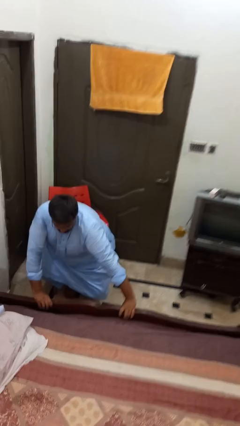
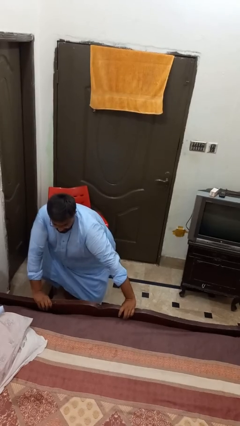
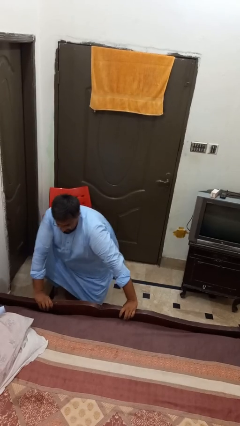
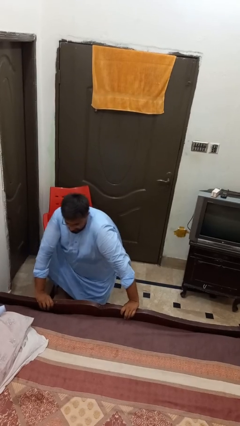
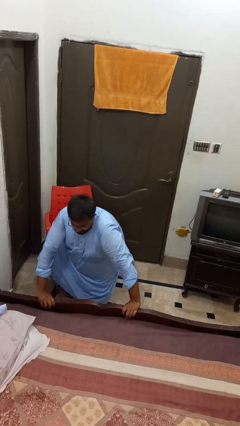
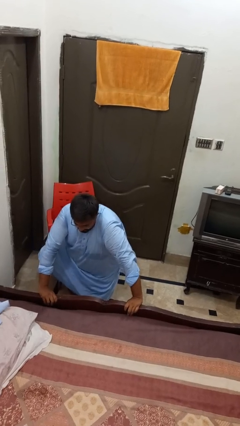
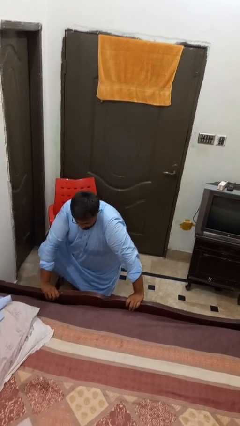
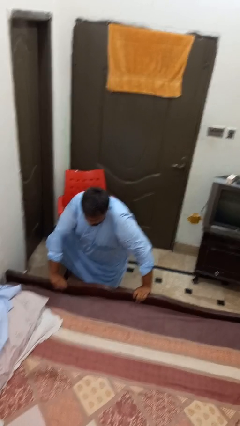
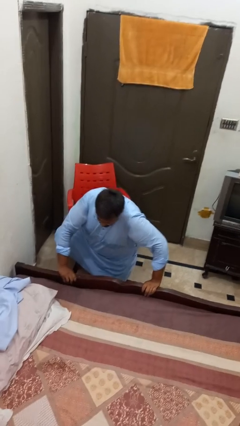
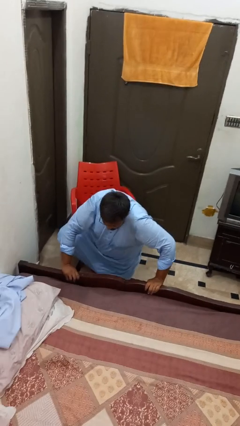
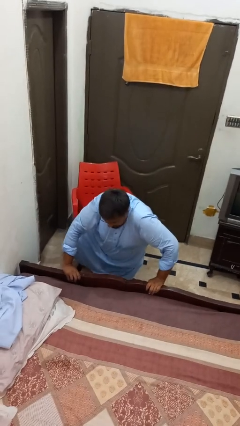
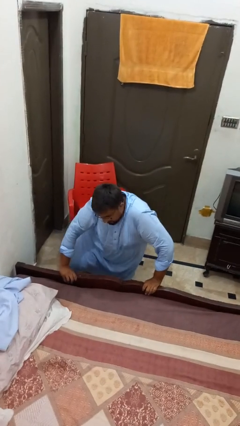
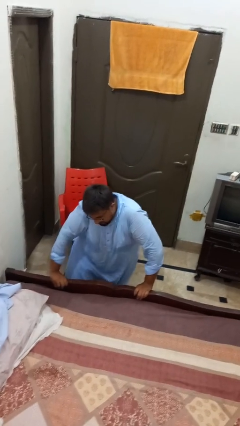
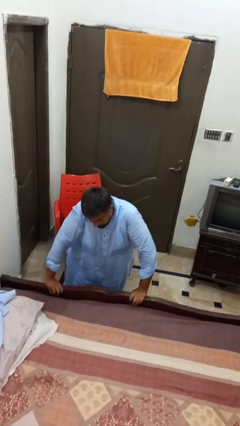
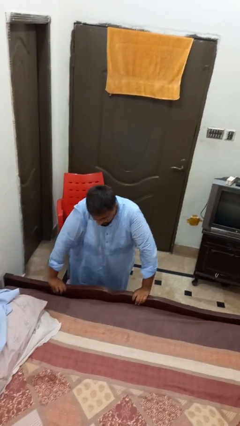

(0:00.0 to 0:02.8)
person falls from chair

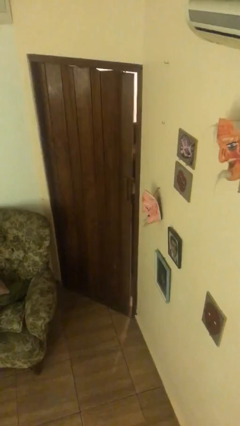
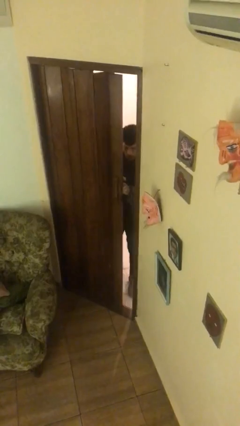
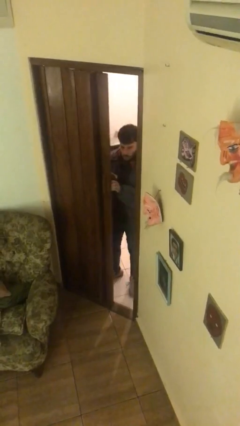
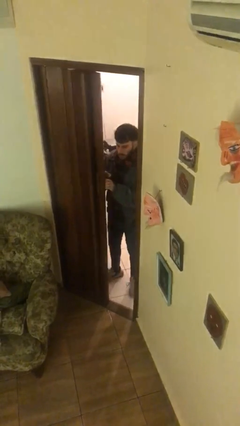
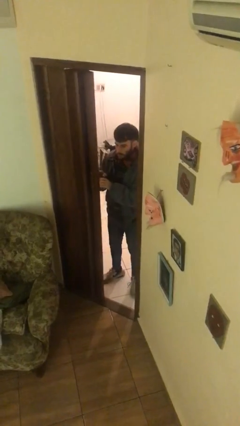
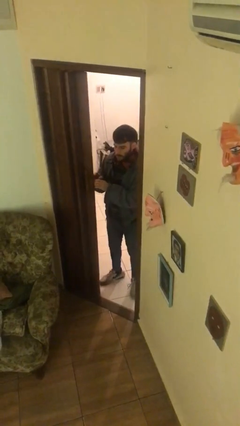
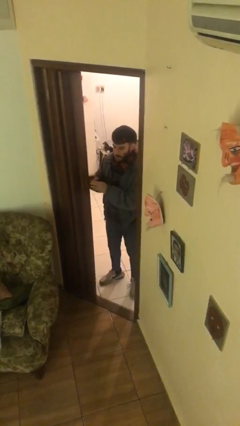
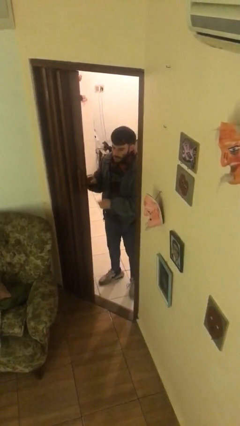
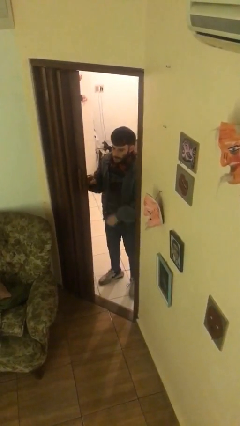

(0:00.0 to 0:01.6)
person opens sliding door

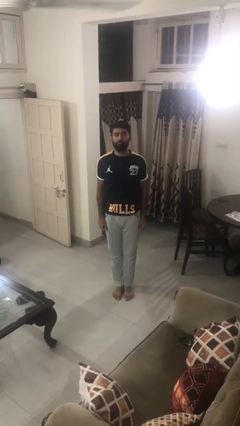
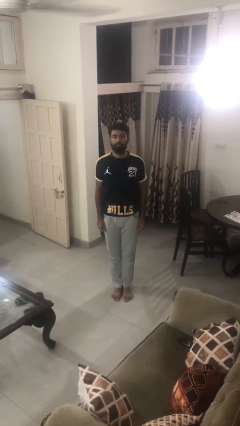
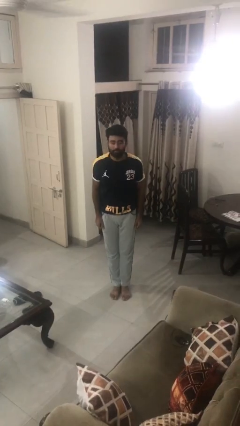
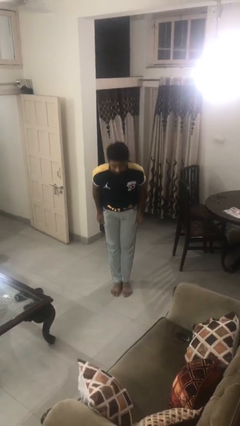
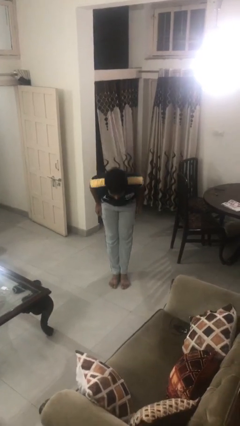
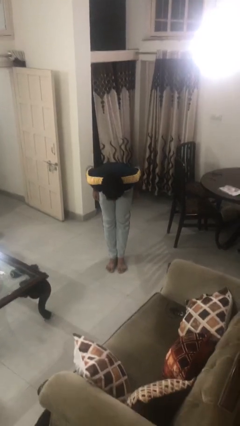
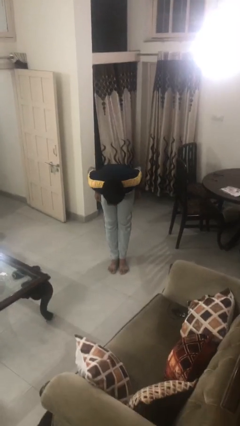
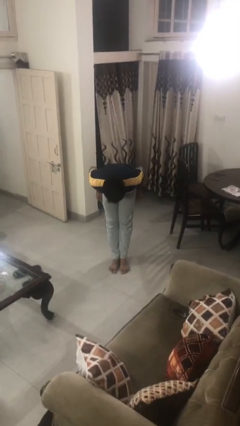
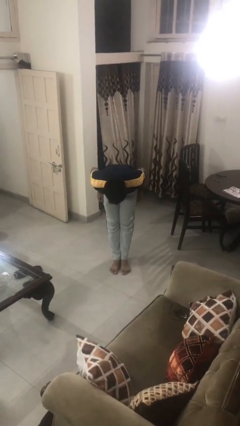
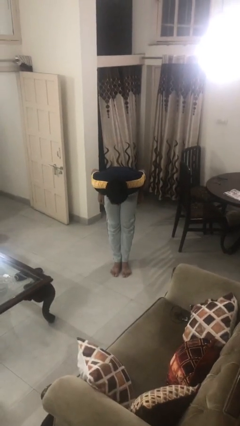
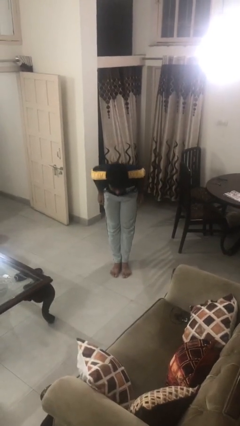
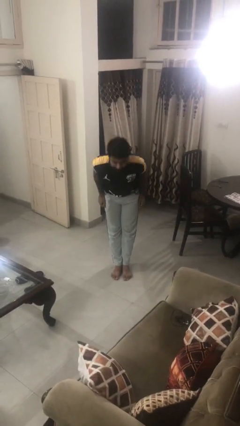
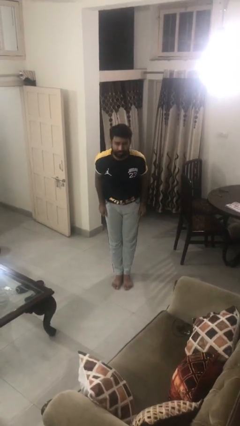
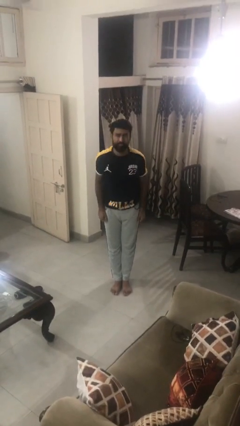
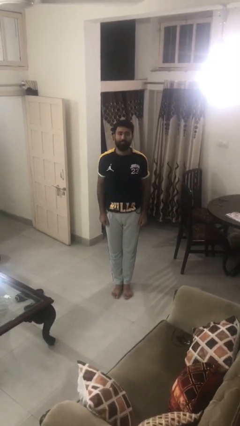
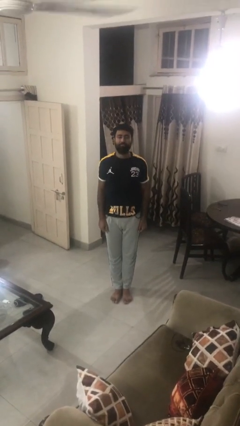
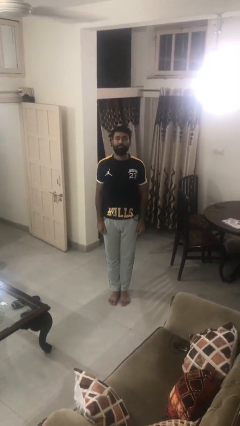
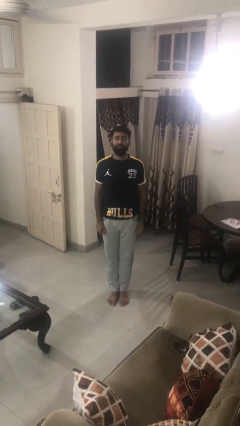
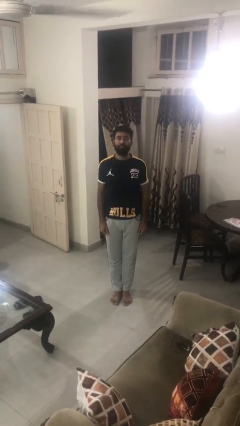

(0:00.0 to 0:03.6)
person bows

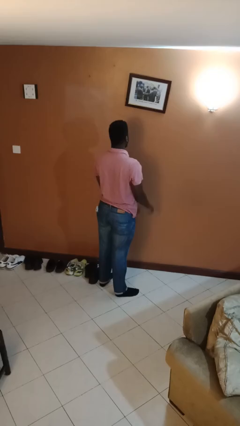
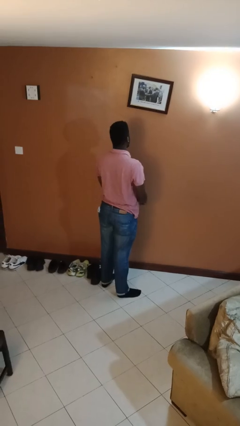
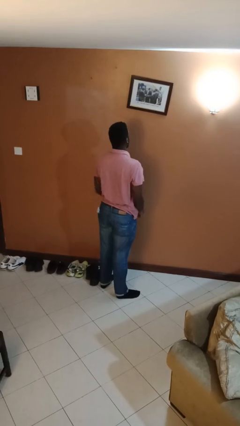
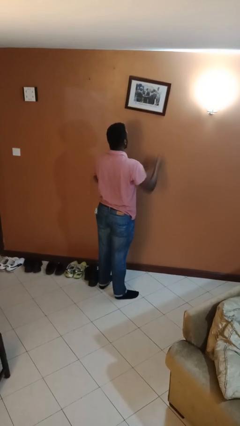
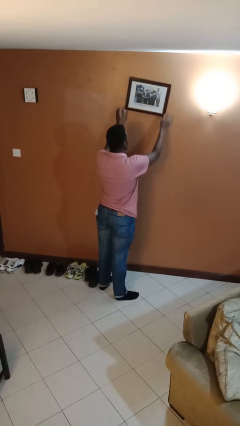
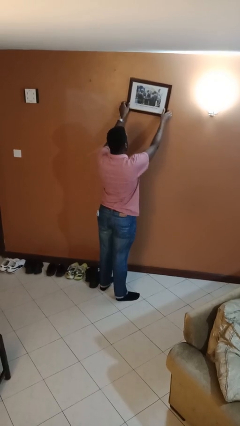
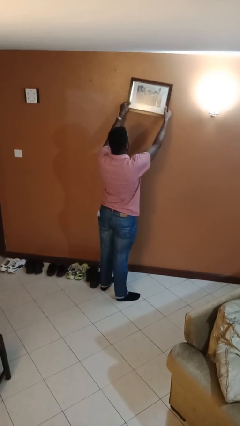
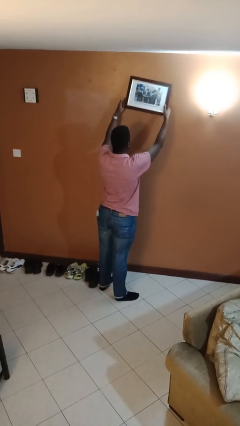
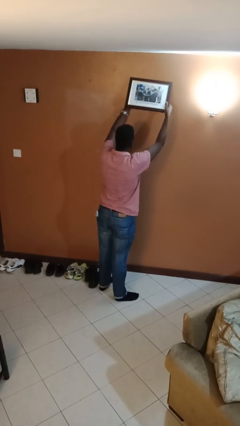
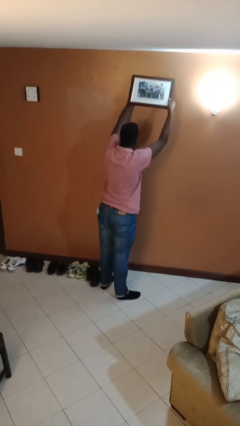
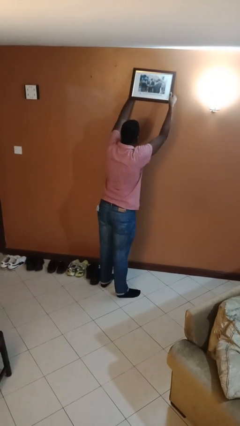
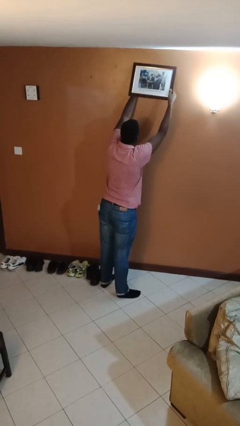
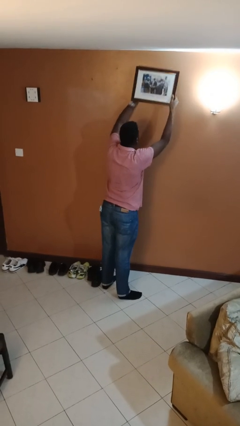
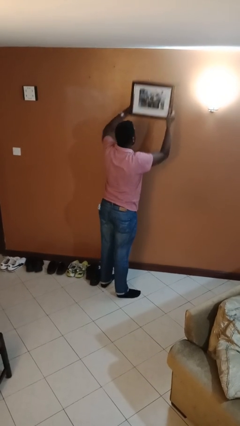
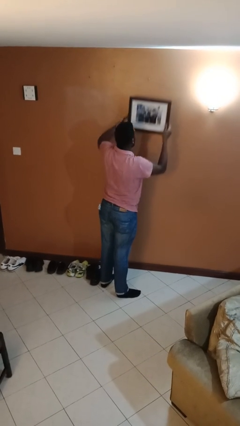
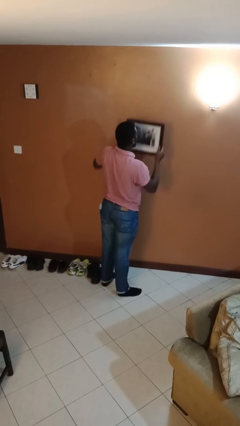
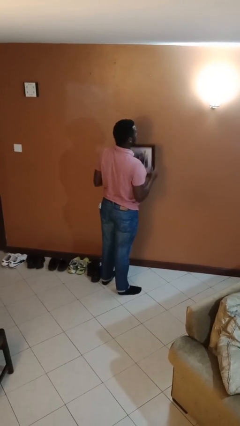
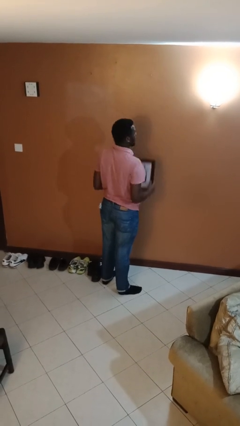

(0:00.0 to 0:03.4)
person takes down picture frame

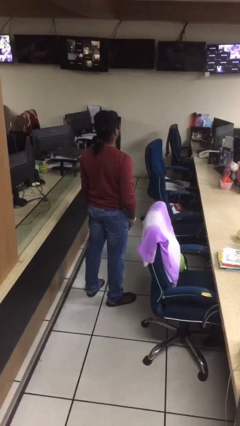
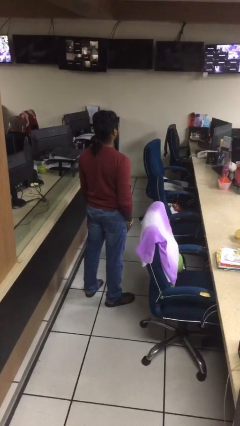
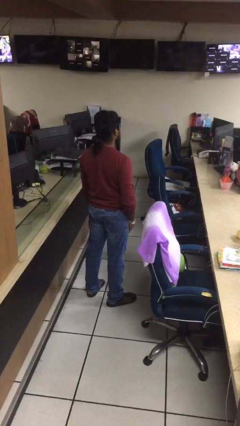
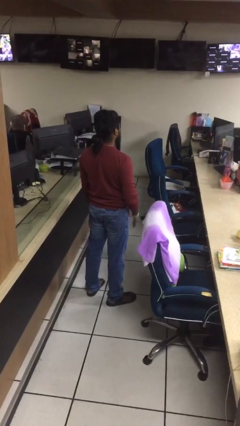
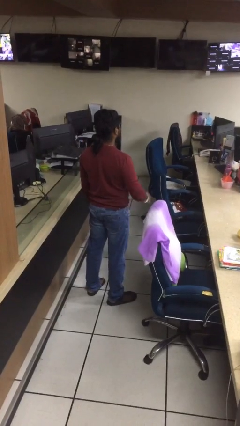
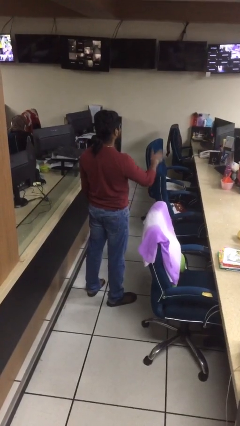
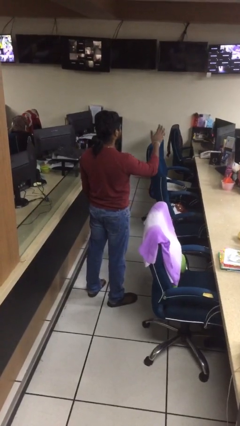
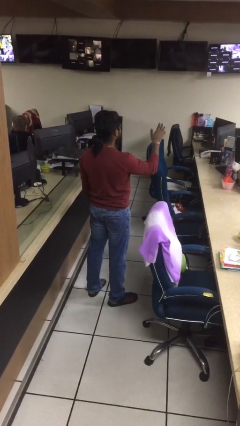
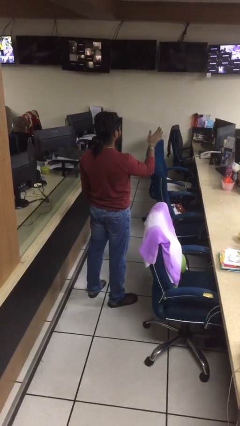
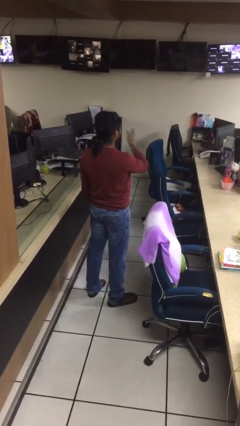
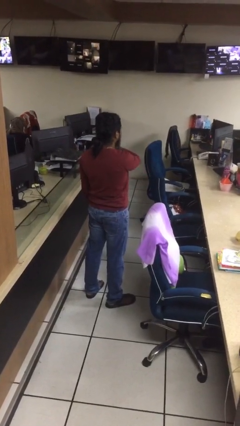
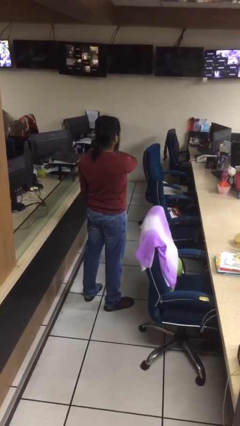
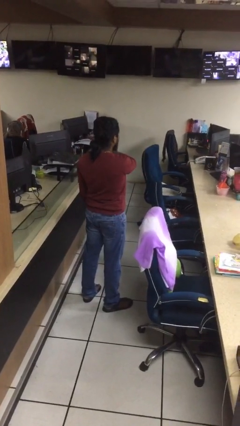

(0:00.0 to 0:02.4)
person gestures swipe left

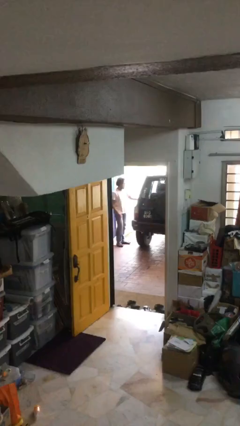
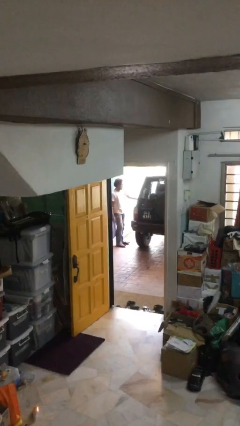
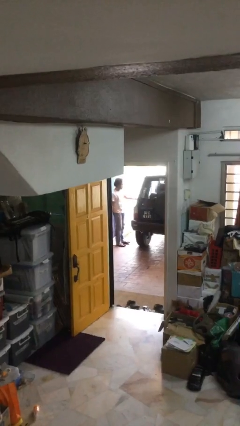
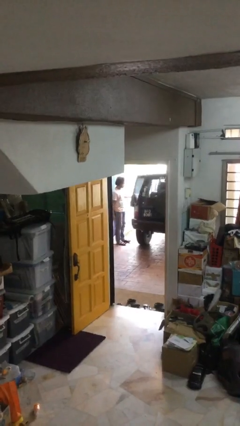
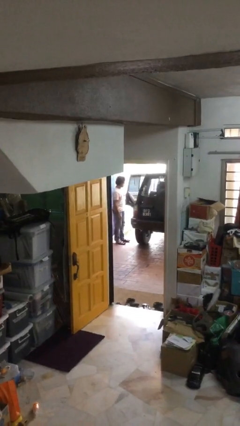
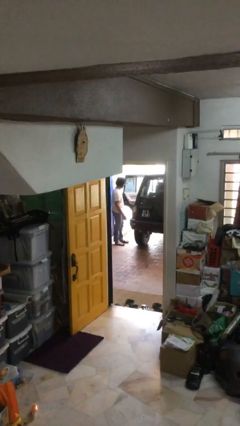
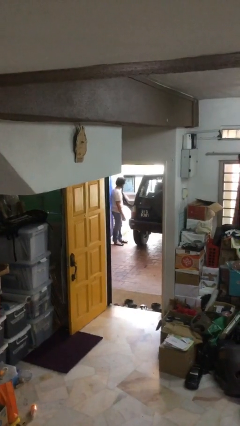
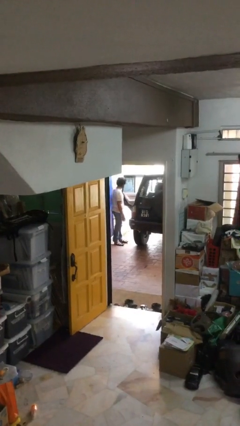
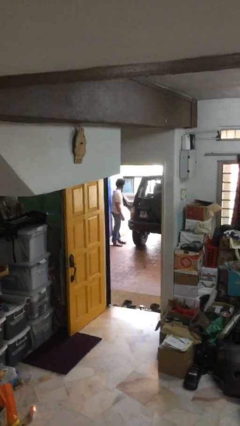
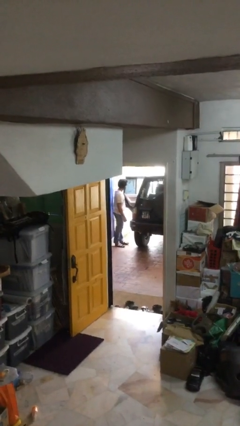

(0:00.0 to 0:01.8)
person opens car door

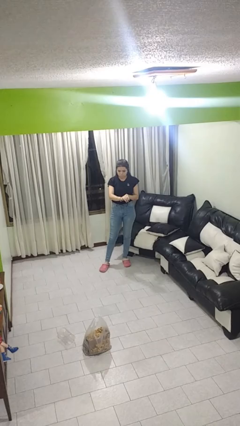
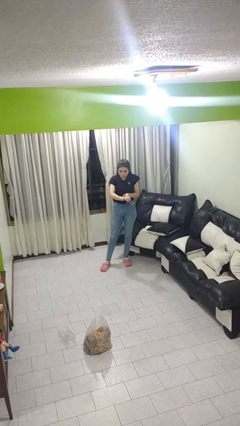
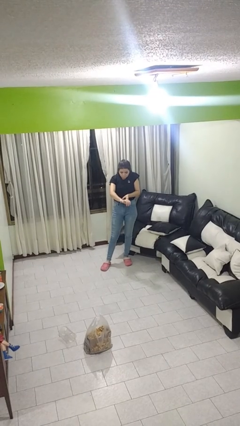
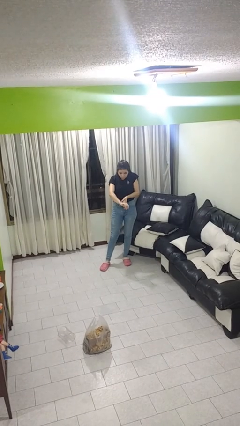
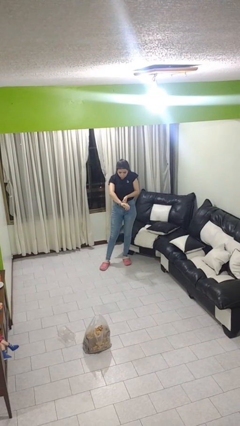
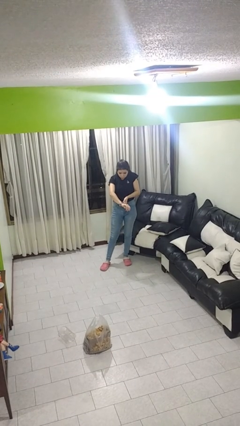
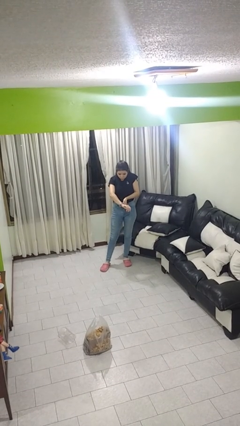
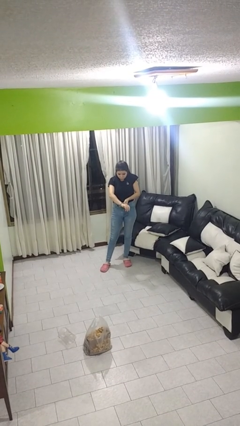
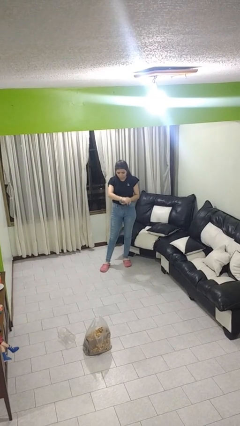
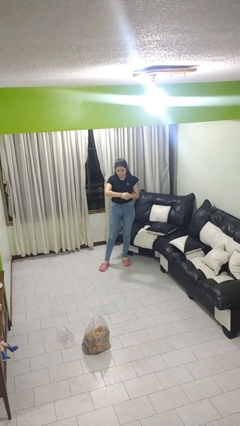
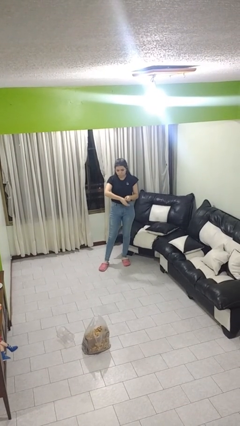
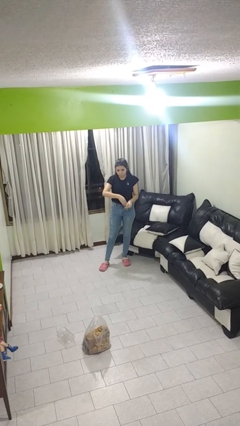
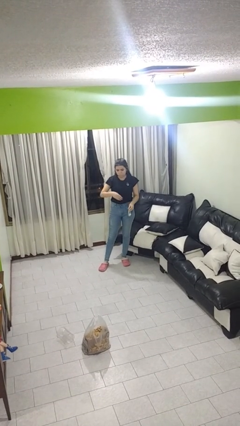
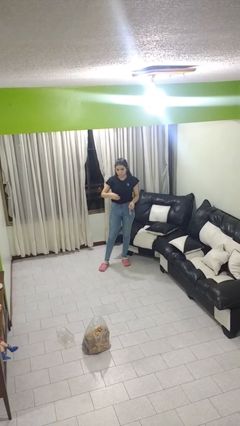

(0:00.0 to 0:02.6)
person takes off wristwatch
